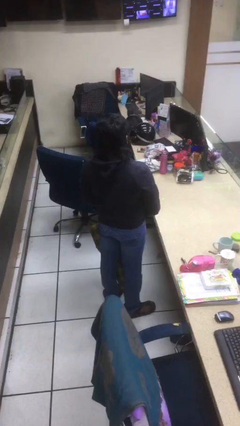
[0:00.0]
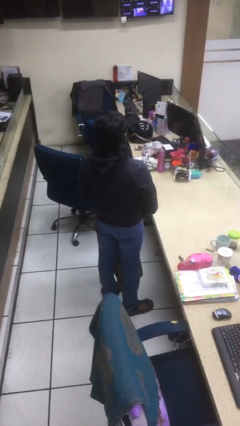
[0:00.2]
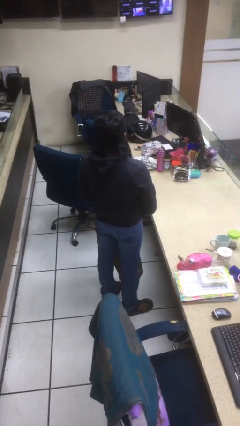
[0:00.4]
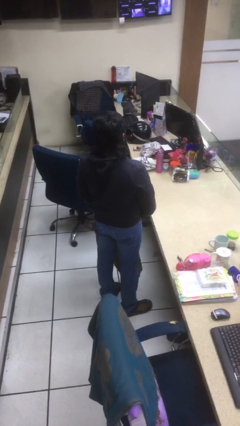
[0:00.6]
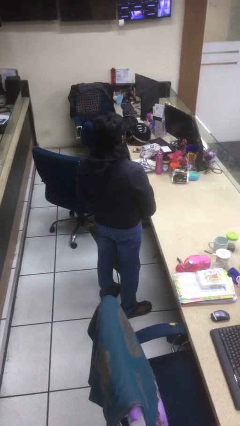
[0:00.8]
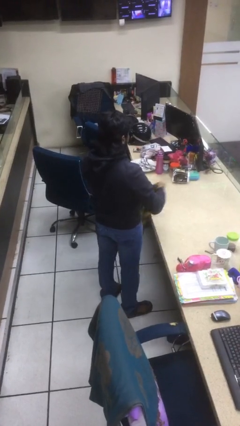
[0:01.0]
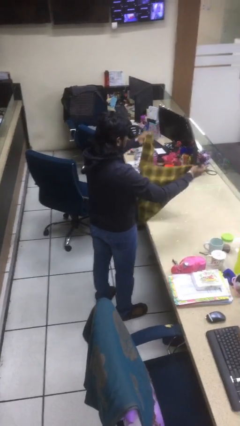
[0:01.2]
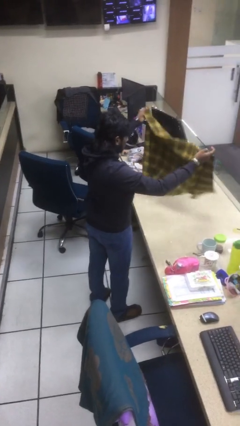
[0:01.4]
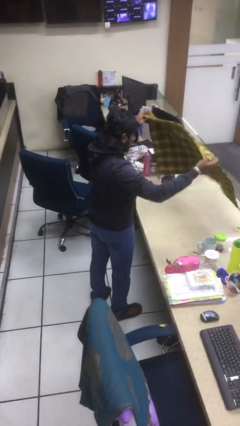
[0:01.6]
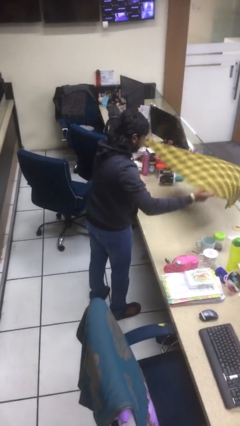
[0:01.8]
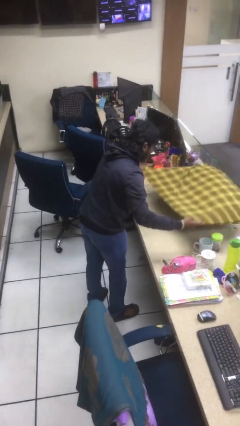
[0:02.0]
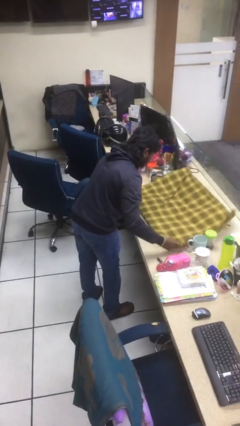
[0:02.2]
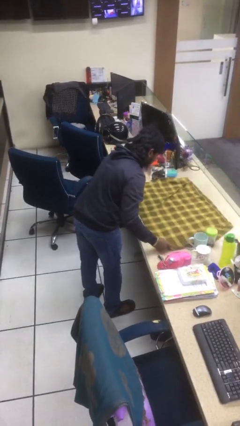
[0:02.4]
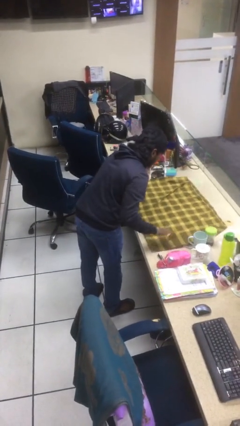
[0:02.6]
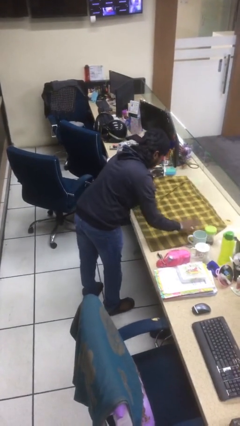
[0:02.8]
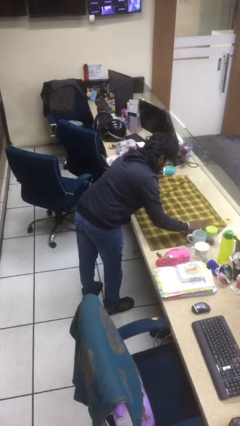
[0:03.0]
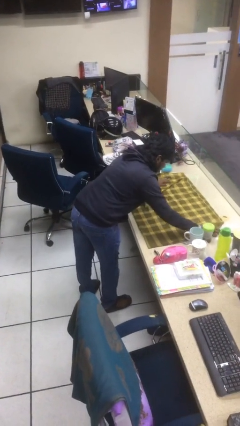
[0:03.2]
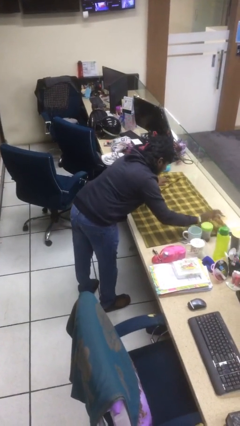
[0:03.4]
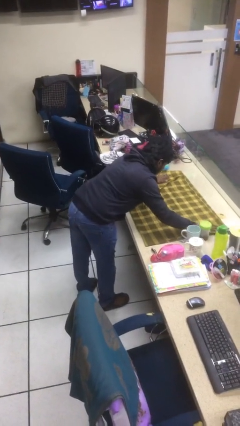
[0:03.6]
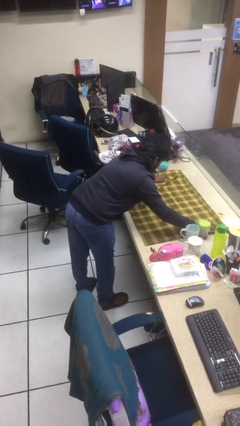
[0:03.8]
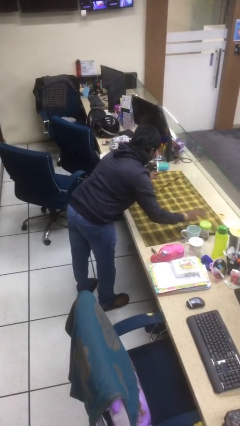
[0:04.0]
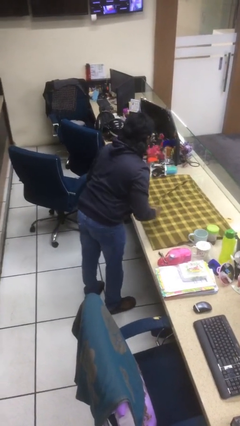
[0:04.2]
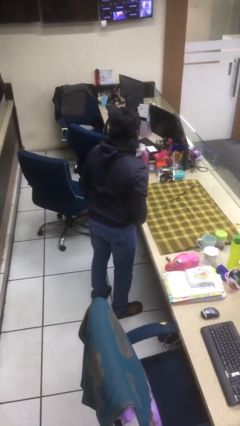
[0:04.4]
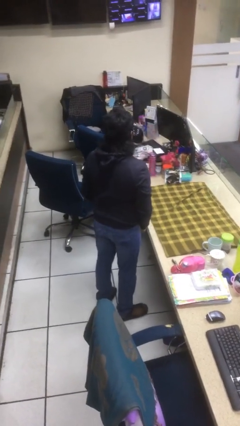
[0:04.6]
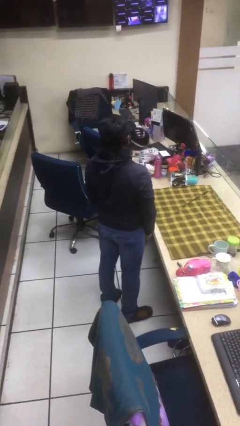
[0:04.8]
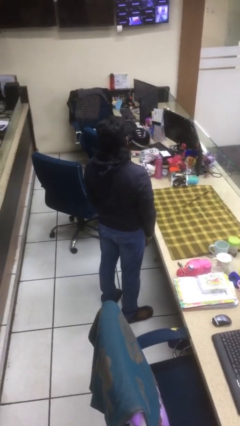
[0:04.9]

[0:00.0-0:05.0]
person spreads tablecloth

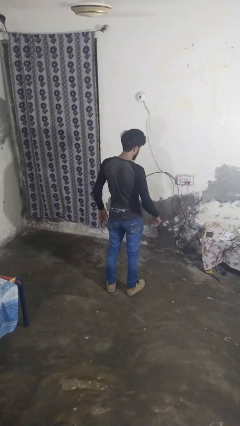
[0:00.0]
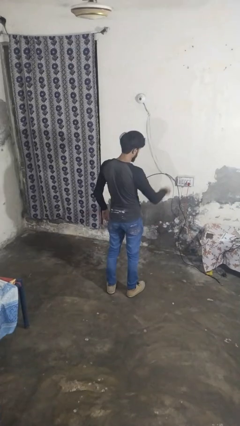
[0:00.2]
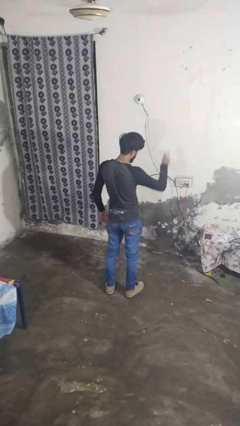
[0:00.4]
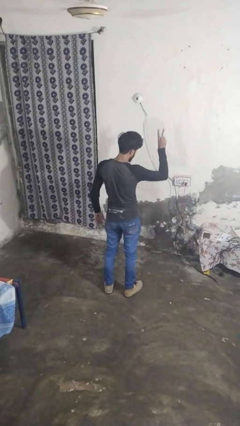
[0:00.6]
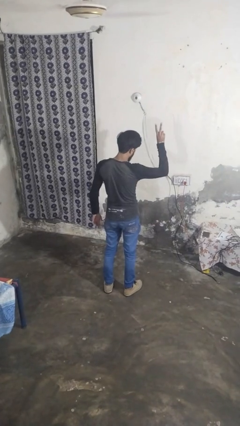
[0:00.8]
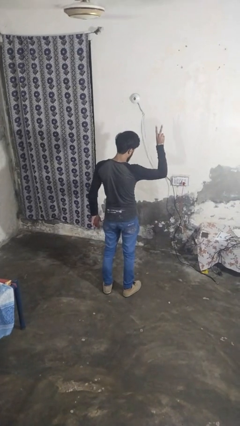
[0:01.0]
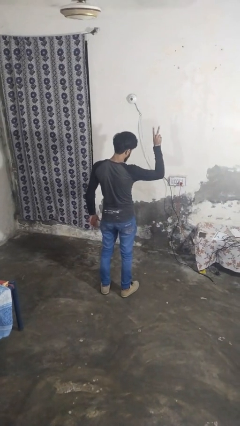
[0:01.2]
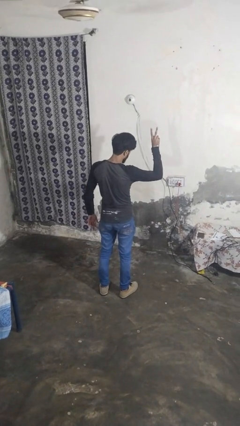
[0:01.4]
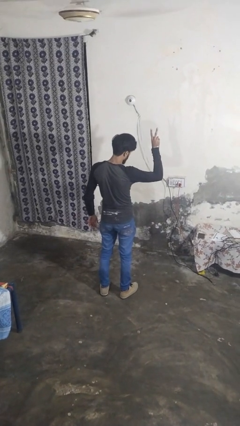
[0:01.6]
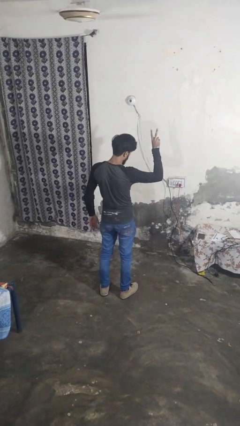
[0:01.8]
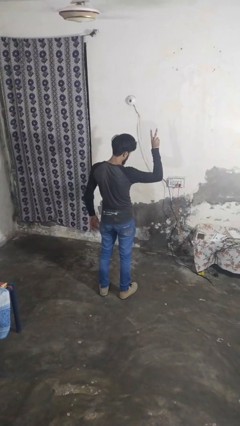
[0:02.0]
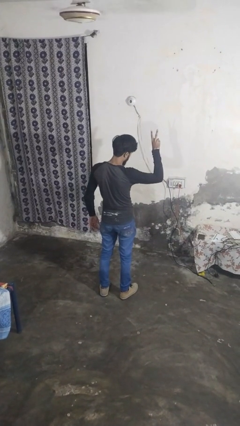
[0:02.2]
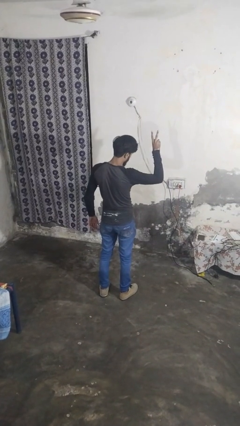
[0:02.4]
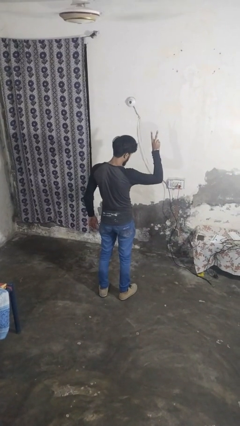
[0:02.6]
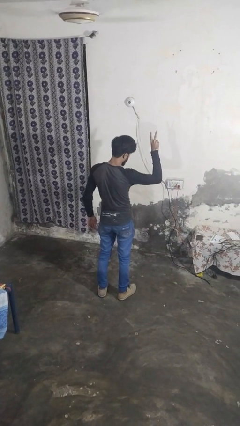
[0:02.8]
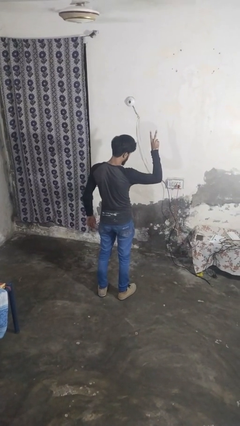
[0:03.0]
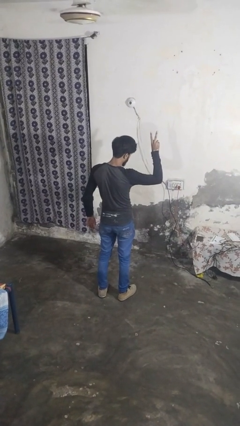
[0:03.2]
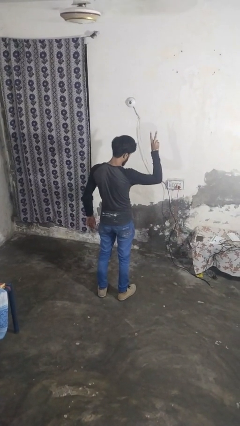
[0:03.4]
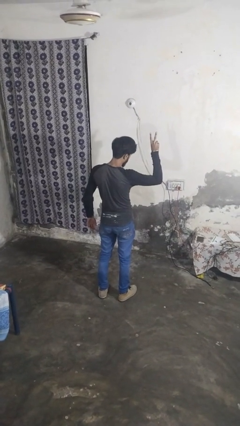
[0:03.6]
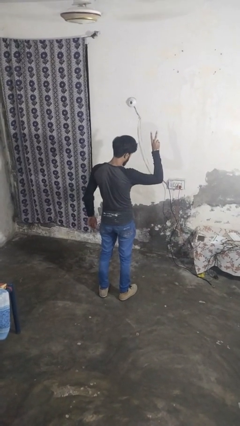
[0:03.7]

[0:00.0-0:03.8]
person gestures peace

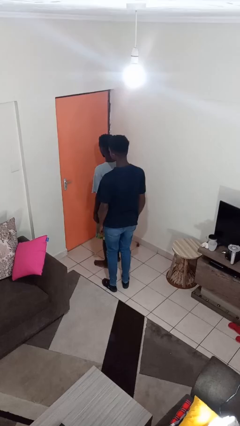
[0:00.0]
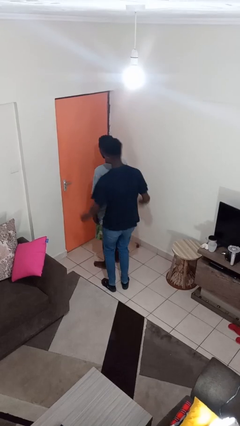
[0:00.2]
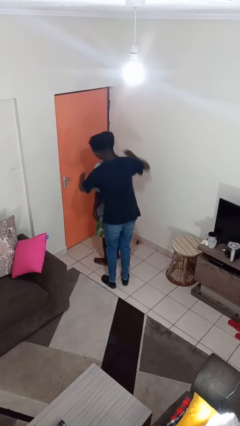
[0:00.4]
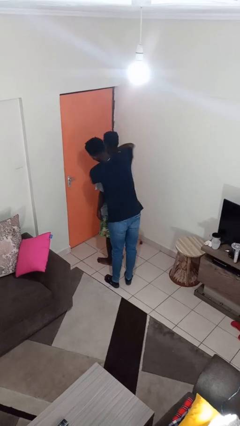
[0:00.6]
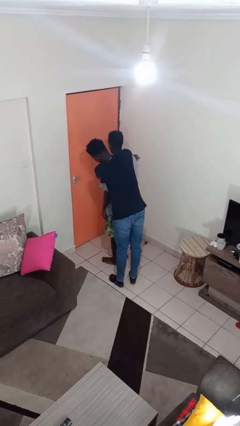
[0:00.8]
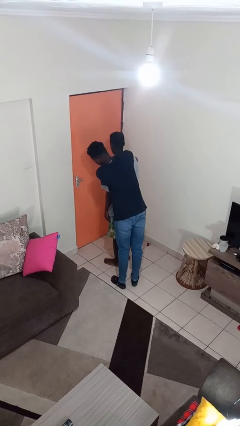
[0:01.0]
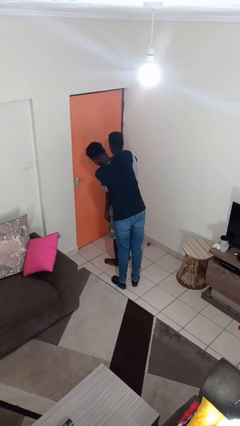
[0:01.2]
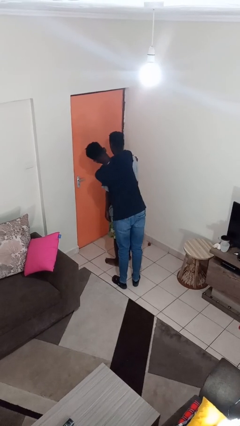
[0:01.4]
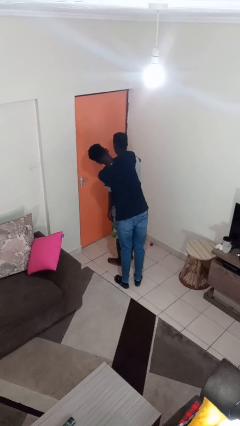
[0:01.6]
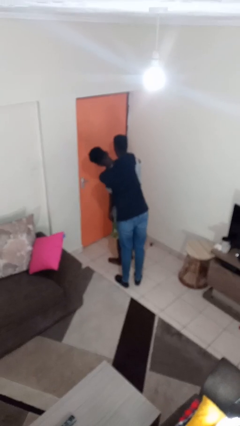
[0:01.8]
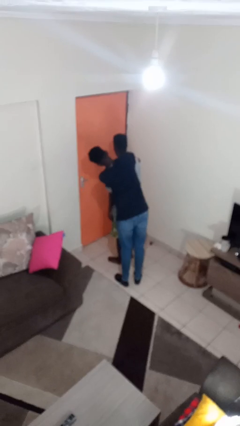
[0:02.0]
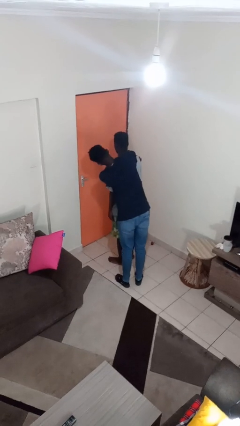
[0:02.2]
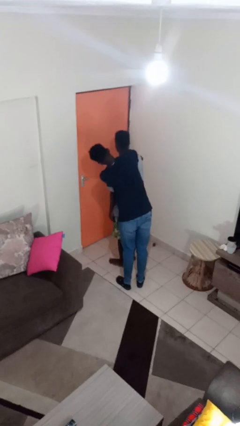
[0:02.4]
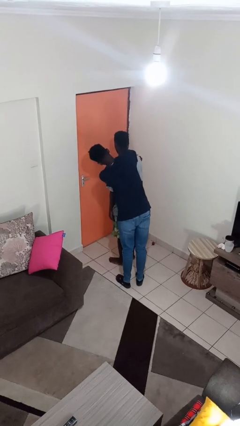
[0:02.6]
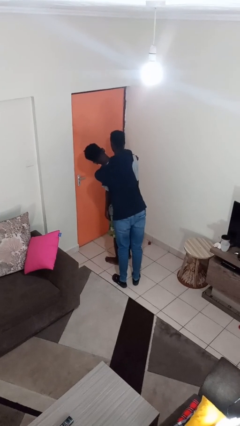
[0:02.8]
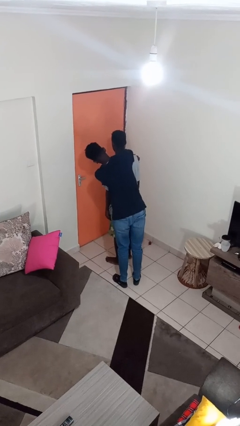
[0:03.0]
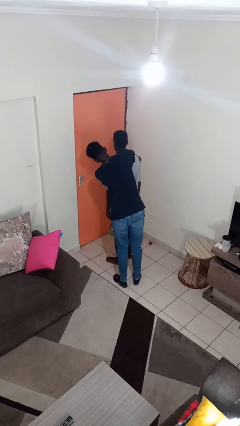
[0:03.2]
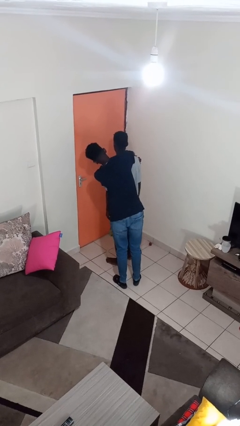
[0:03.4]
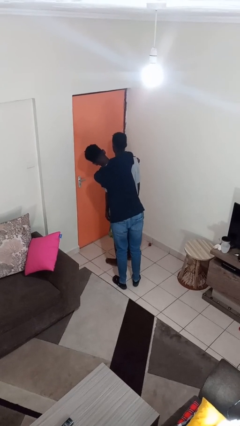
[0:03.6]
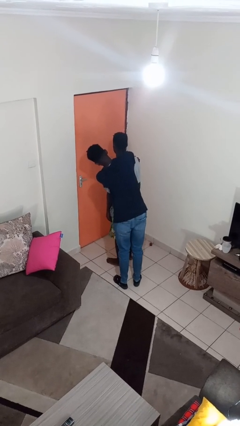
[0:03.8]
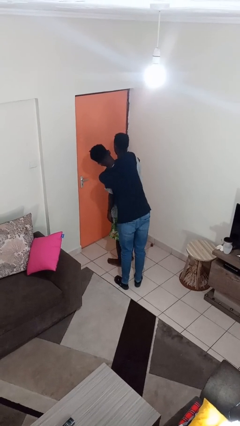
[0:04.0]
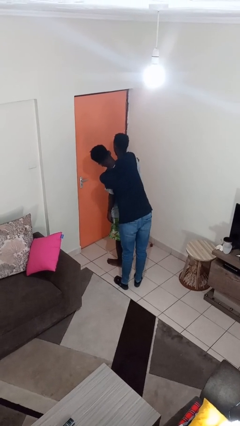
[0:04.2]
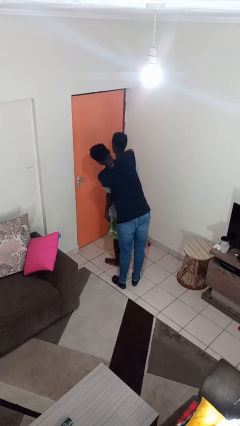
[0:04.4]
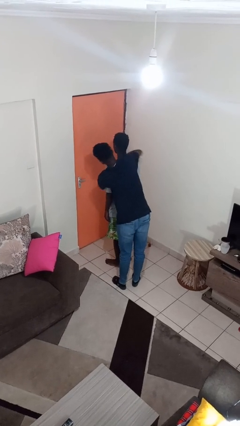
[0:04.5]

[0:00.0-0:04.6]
person hugs person from behind

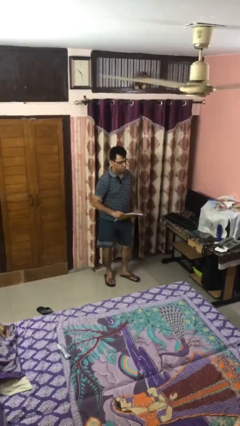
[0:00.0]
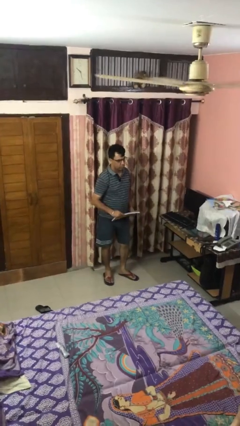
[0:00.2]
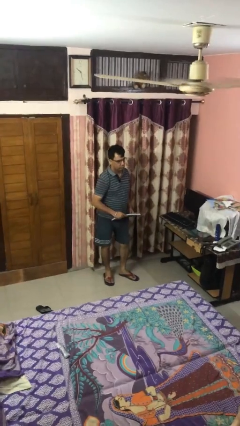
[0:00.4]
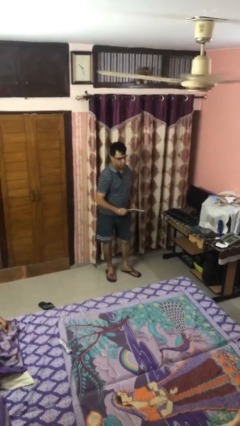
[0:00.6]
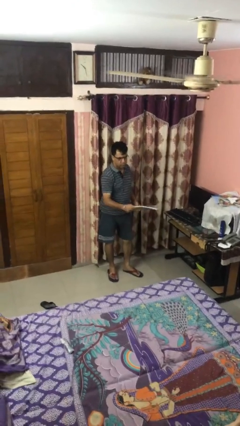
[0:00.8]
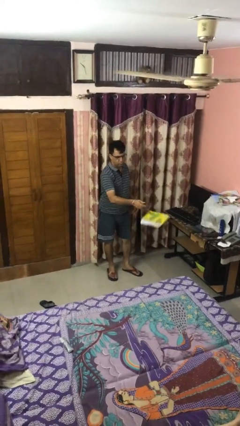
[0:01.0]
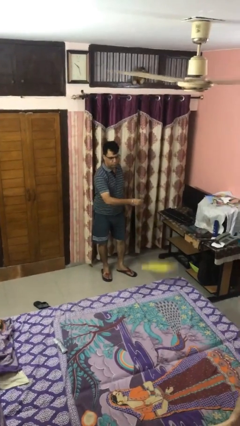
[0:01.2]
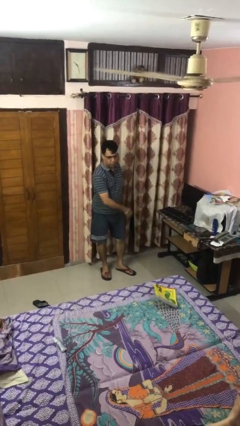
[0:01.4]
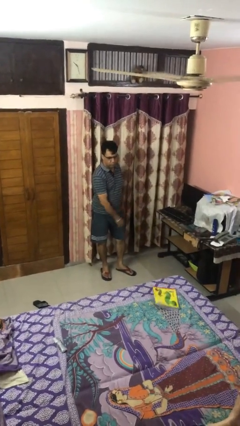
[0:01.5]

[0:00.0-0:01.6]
person throws object on bed

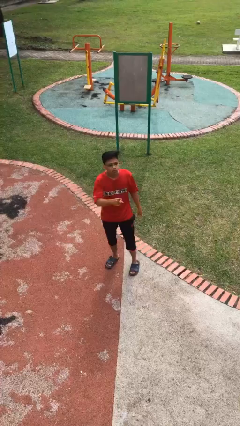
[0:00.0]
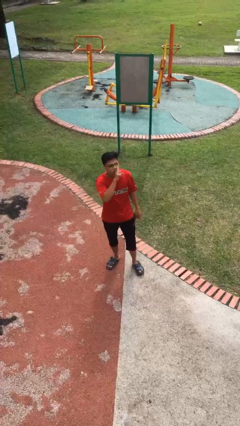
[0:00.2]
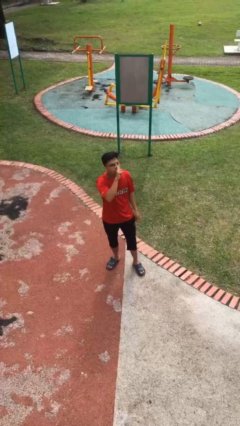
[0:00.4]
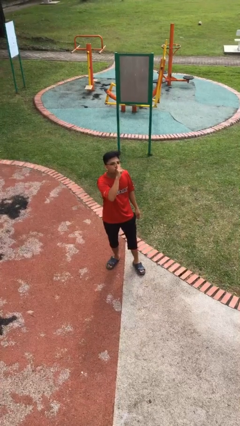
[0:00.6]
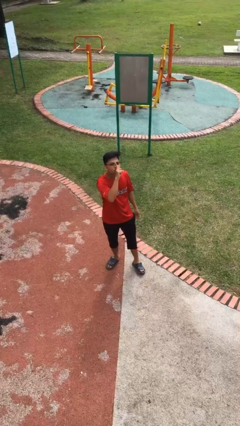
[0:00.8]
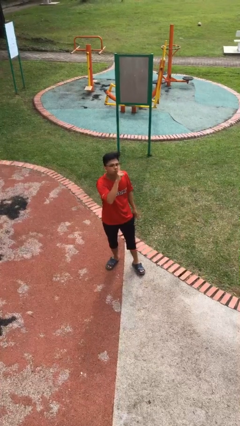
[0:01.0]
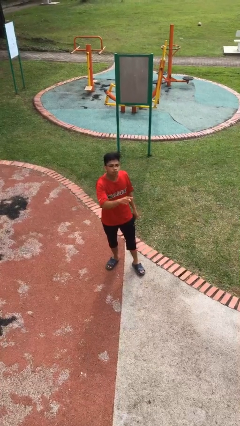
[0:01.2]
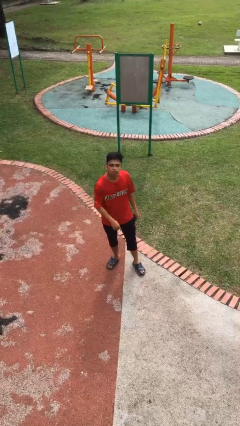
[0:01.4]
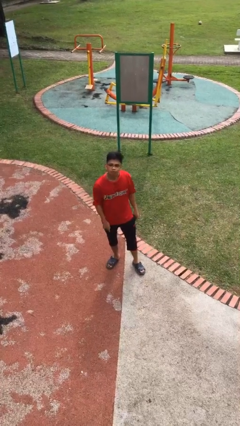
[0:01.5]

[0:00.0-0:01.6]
person gestures be quiet

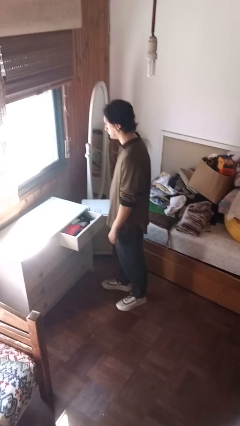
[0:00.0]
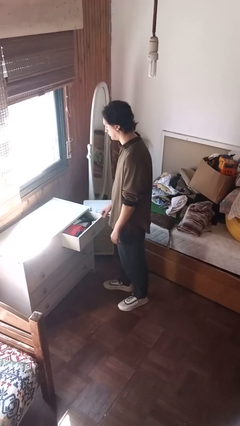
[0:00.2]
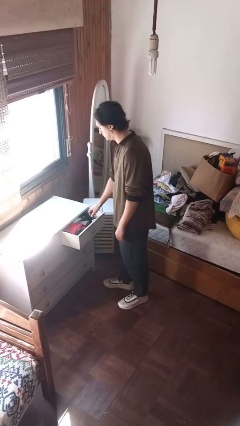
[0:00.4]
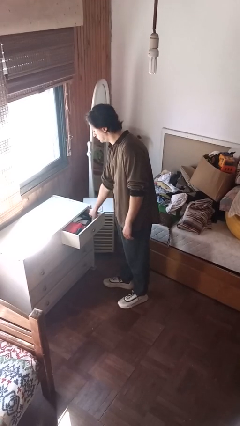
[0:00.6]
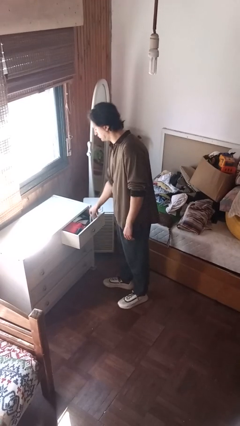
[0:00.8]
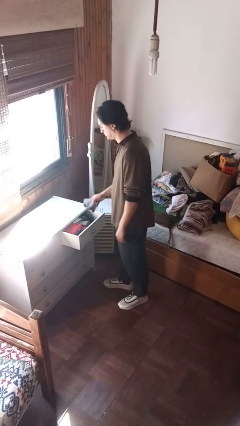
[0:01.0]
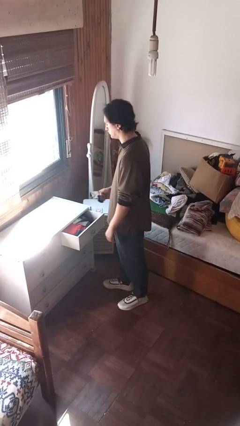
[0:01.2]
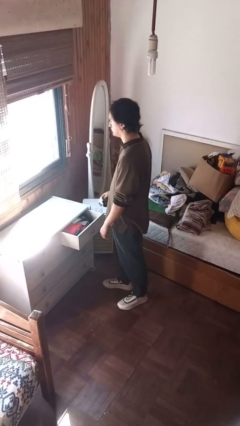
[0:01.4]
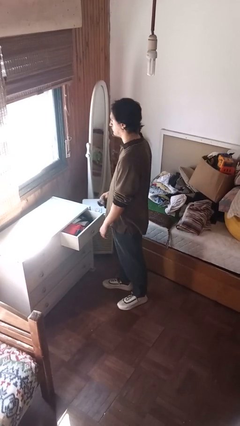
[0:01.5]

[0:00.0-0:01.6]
person takes clothes from dresser
